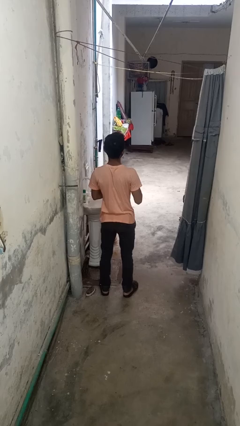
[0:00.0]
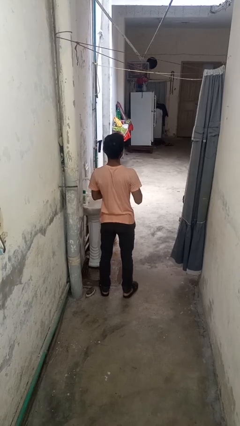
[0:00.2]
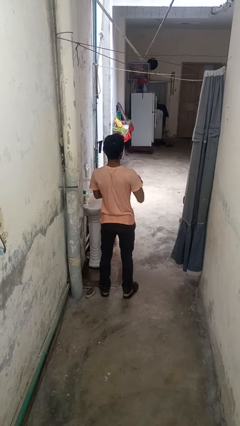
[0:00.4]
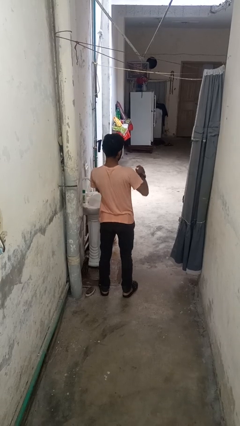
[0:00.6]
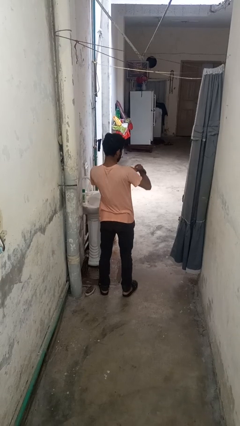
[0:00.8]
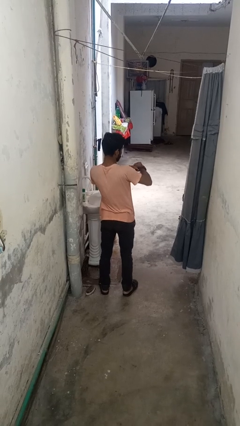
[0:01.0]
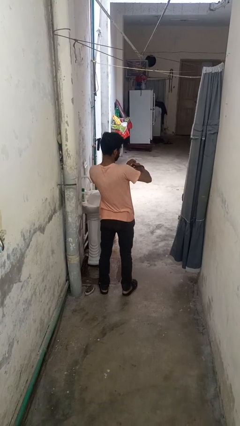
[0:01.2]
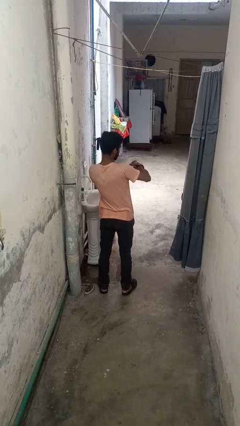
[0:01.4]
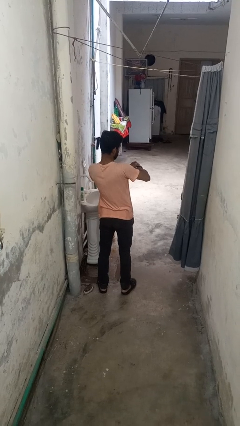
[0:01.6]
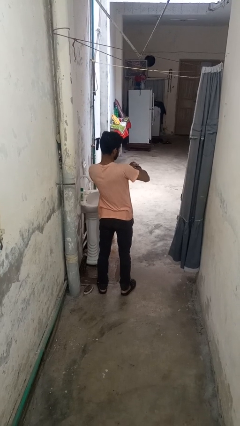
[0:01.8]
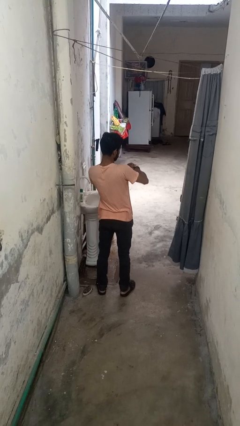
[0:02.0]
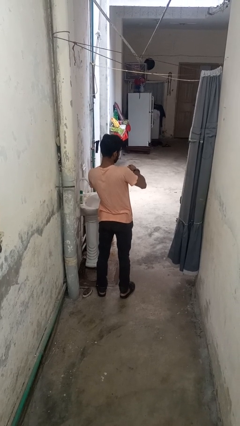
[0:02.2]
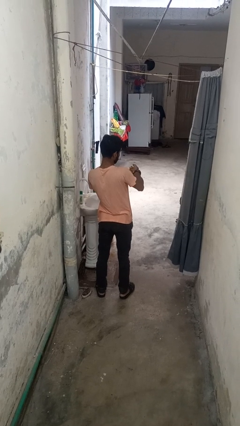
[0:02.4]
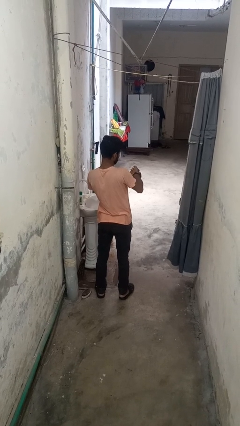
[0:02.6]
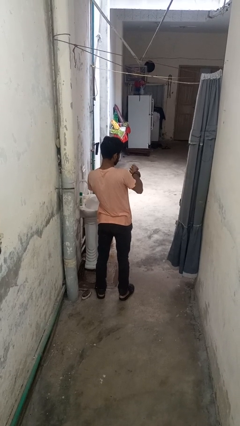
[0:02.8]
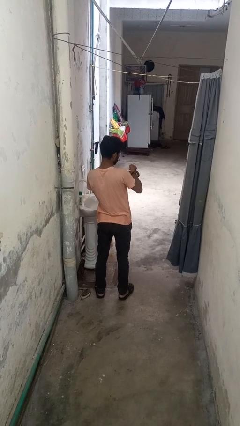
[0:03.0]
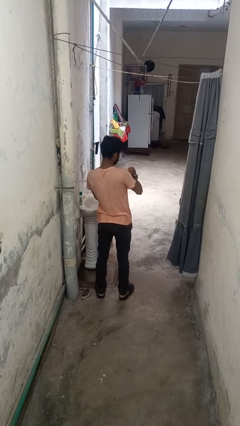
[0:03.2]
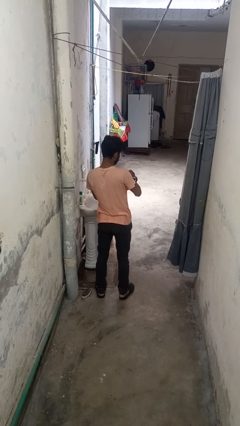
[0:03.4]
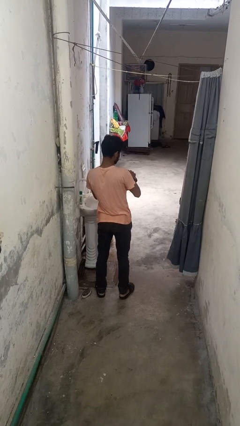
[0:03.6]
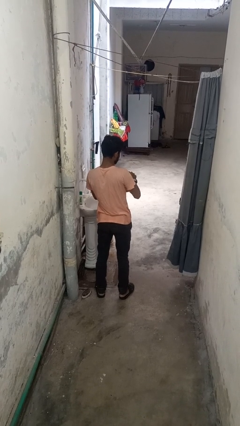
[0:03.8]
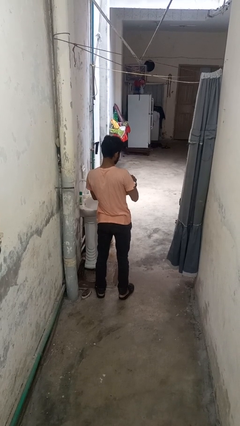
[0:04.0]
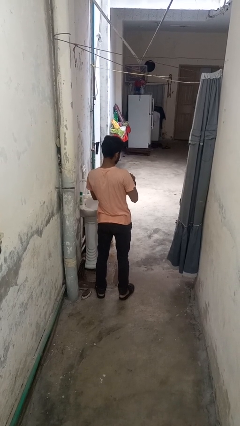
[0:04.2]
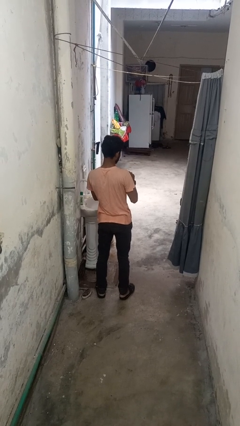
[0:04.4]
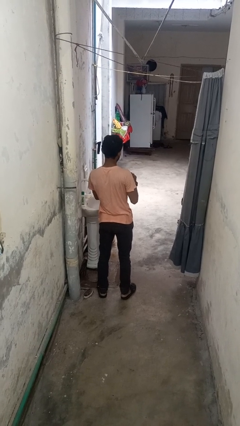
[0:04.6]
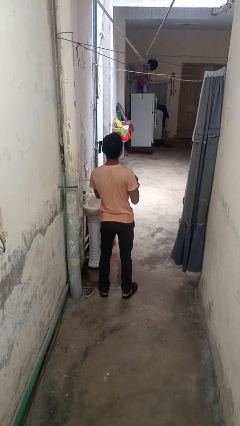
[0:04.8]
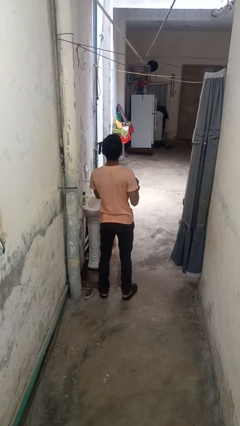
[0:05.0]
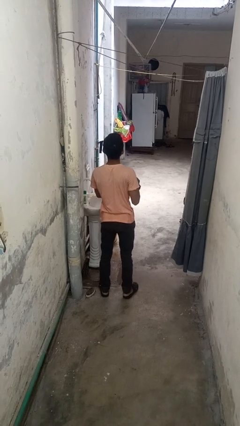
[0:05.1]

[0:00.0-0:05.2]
person puts on wristwatch

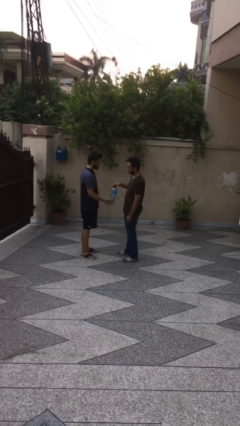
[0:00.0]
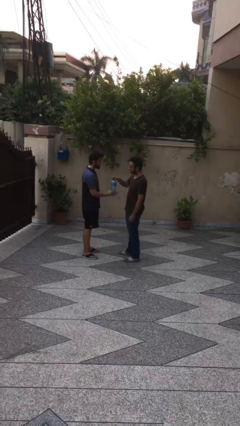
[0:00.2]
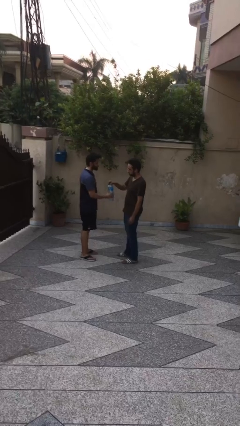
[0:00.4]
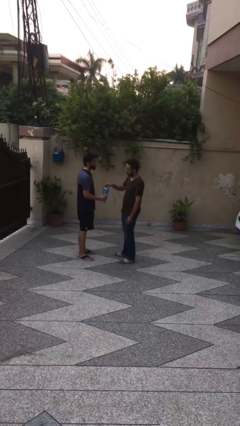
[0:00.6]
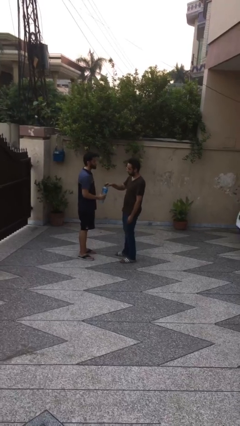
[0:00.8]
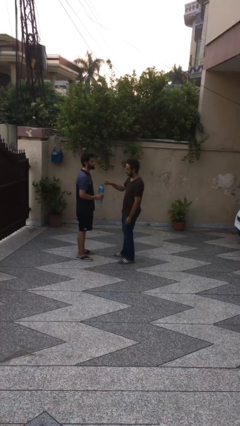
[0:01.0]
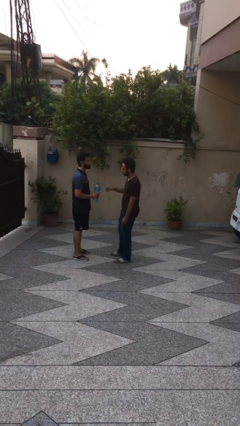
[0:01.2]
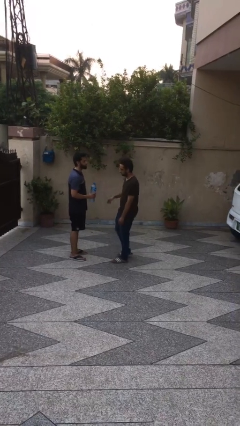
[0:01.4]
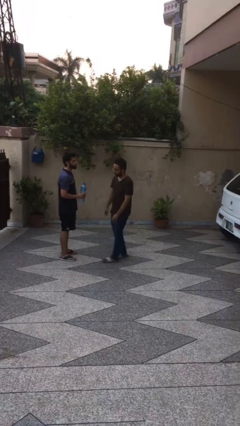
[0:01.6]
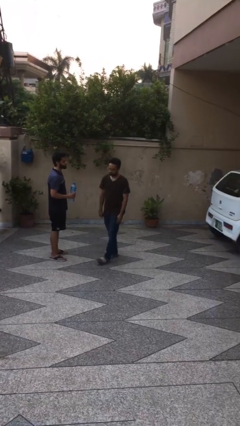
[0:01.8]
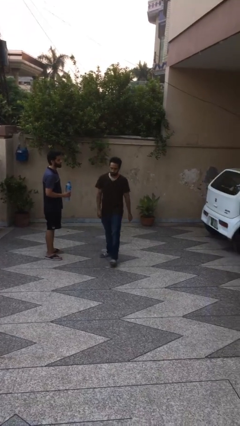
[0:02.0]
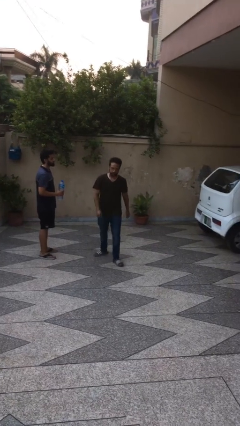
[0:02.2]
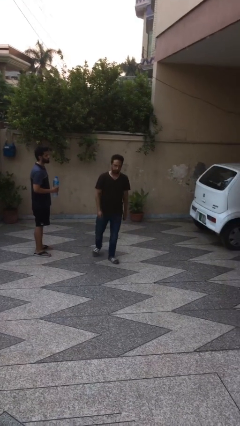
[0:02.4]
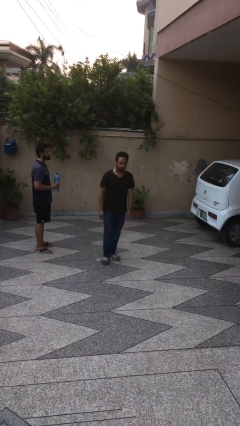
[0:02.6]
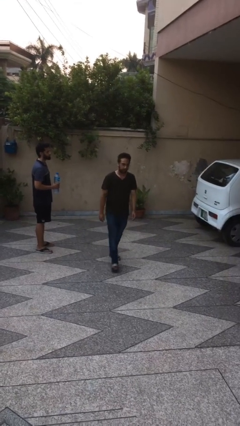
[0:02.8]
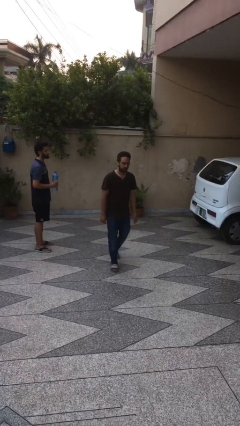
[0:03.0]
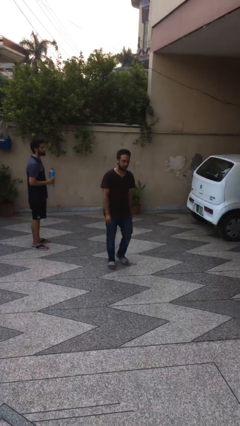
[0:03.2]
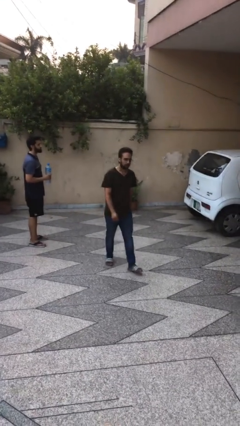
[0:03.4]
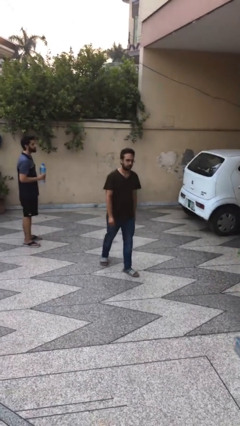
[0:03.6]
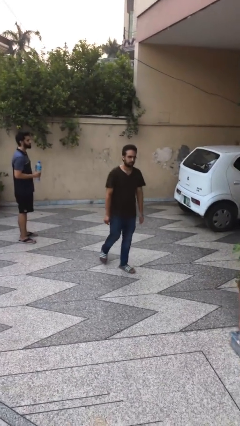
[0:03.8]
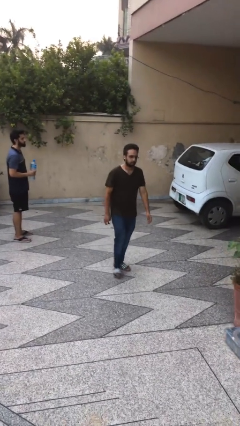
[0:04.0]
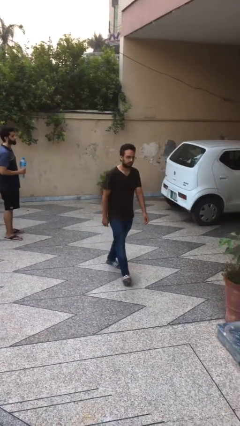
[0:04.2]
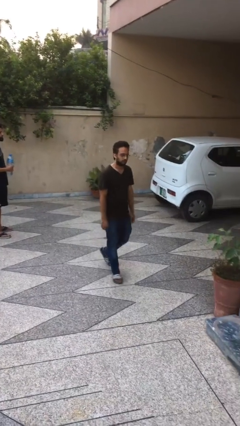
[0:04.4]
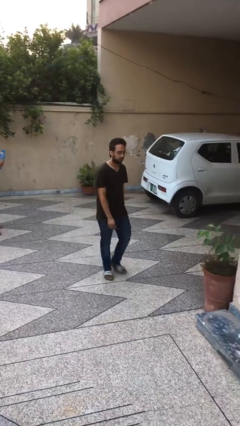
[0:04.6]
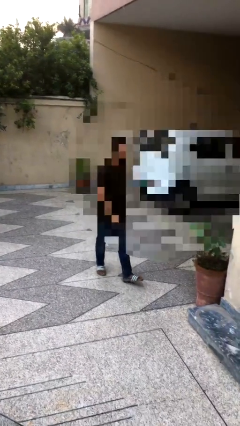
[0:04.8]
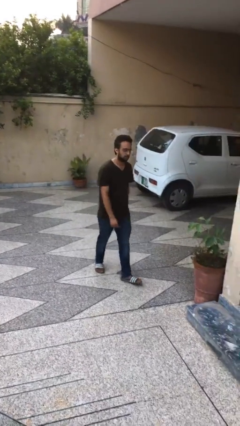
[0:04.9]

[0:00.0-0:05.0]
person transfers object to person

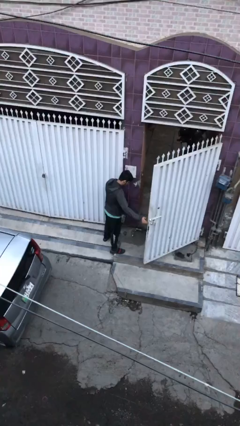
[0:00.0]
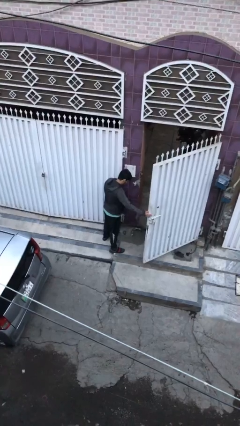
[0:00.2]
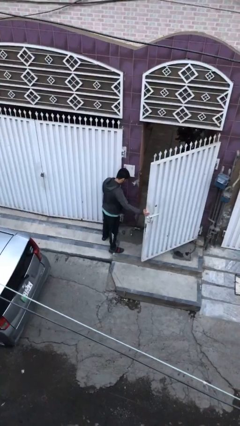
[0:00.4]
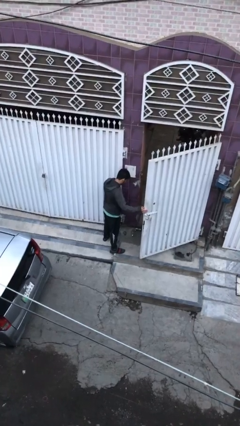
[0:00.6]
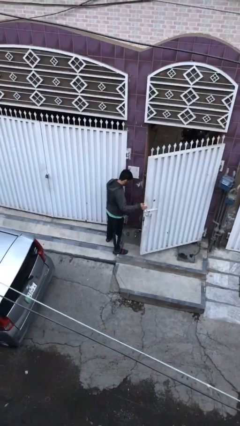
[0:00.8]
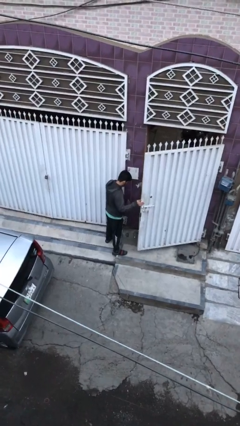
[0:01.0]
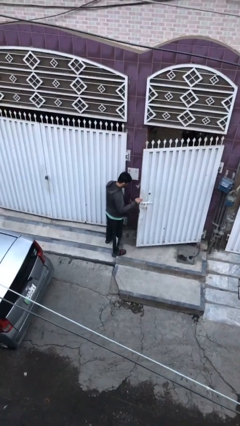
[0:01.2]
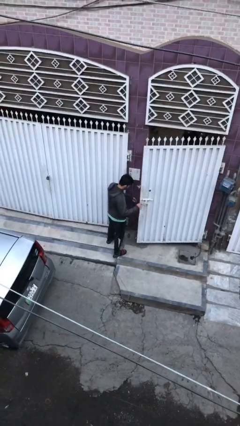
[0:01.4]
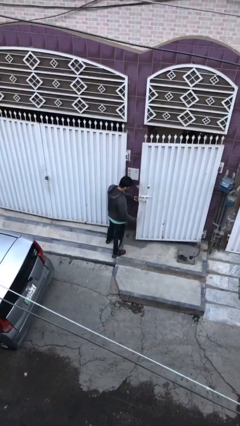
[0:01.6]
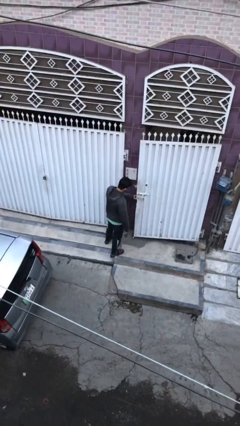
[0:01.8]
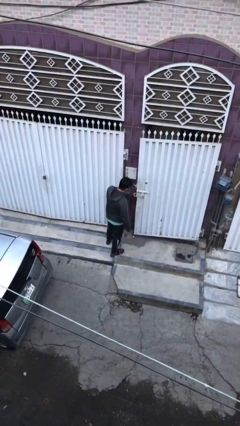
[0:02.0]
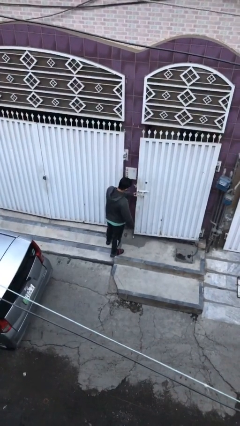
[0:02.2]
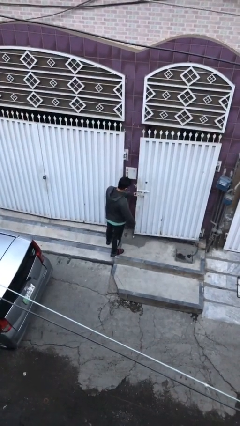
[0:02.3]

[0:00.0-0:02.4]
person closes facility door

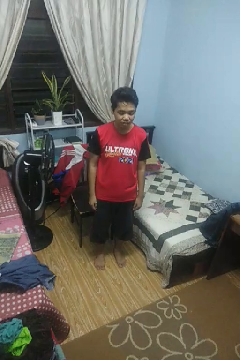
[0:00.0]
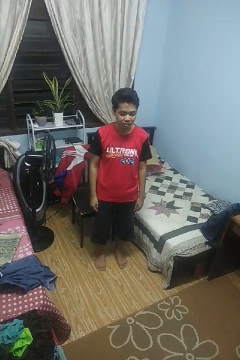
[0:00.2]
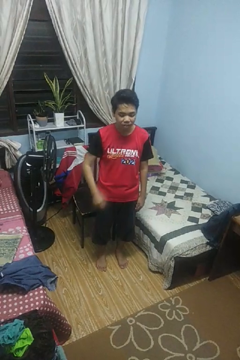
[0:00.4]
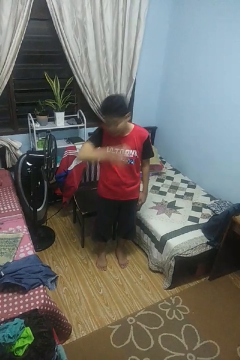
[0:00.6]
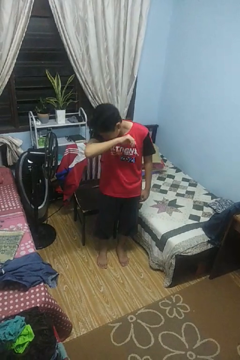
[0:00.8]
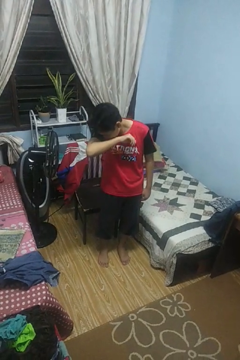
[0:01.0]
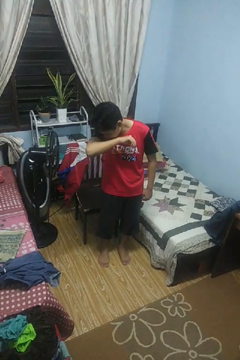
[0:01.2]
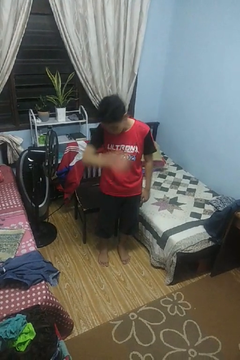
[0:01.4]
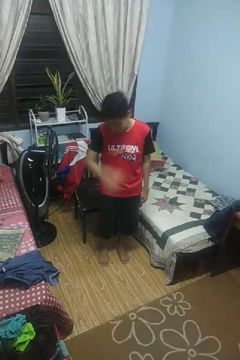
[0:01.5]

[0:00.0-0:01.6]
person sneezes into arm

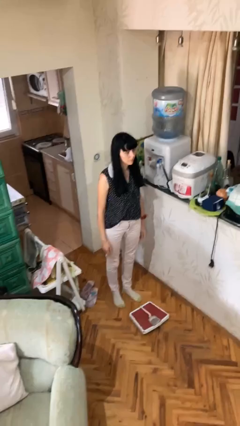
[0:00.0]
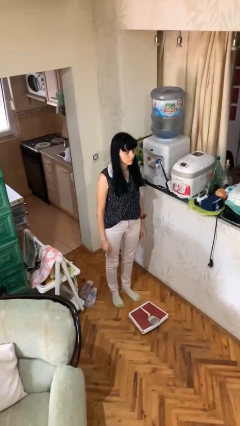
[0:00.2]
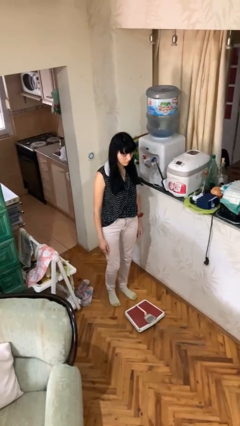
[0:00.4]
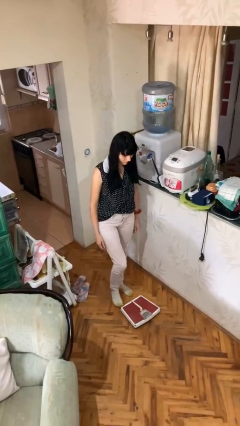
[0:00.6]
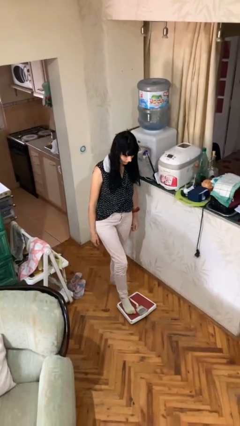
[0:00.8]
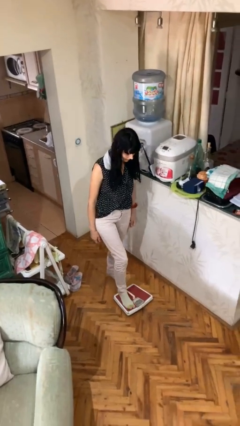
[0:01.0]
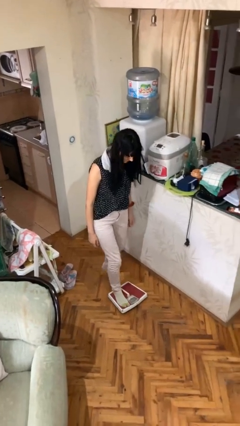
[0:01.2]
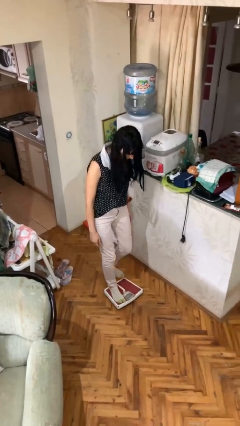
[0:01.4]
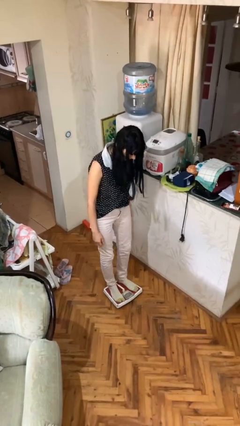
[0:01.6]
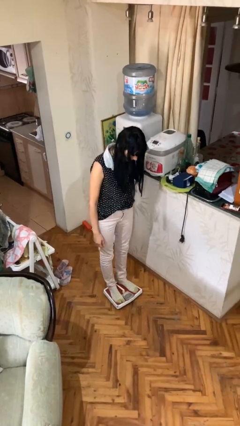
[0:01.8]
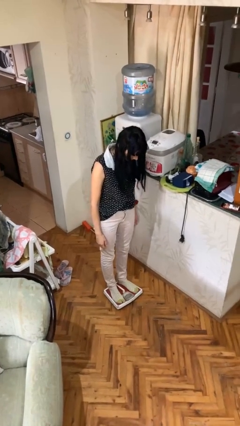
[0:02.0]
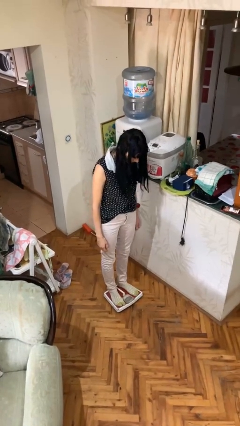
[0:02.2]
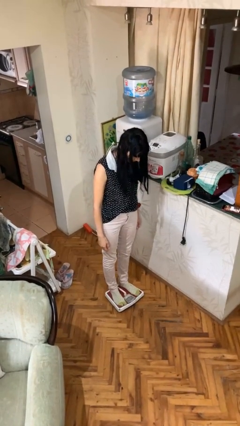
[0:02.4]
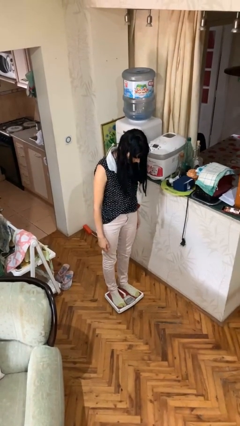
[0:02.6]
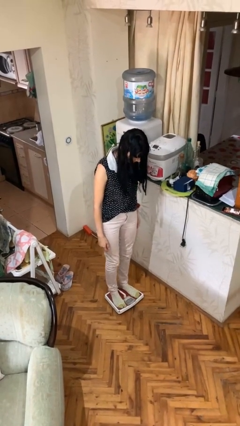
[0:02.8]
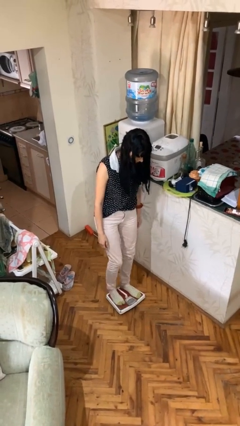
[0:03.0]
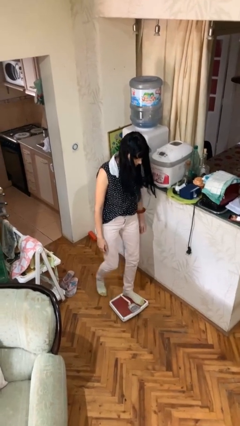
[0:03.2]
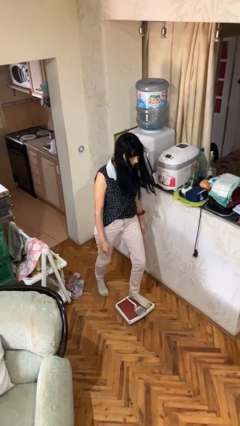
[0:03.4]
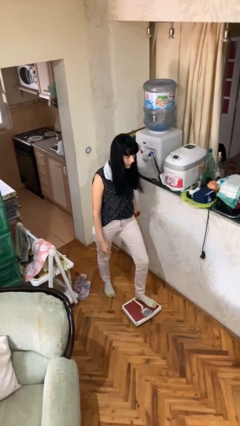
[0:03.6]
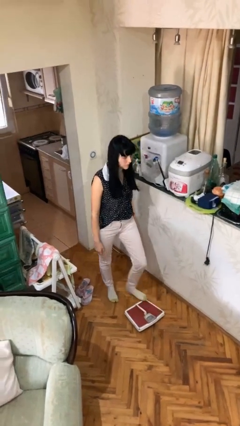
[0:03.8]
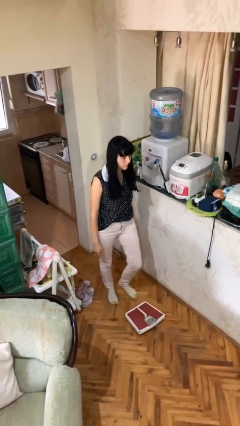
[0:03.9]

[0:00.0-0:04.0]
person uses bodyweight scale

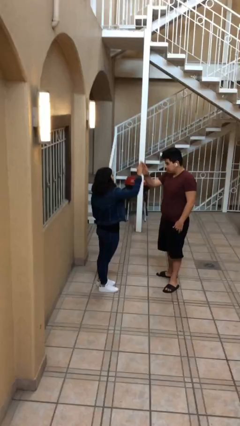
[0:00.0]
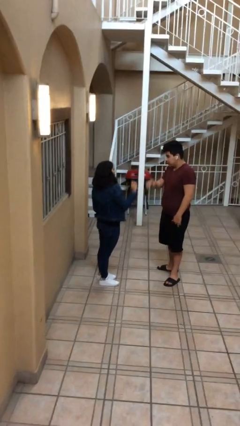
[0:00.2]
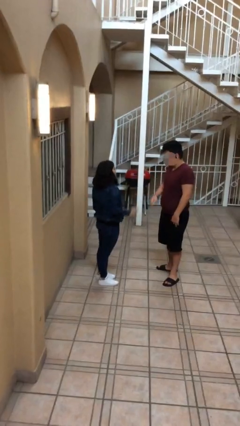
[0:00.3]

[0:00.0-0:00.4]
person highfives hand
